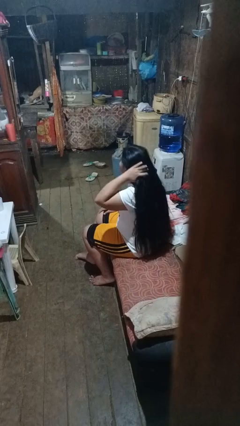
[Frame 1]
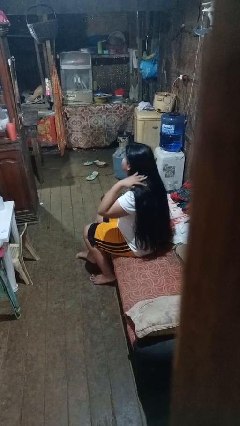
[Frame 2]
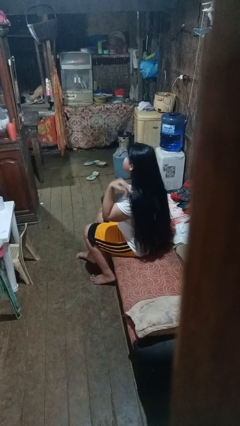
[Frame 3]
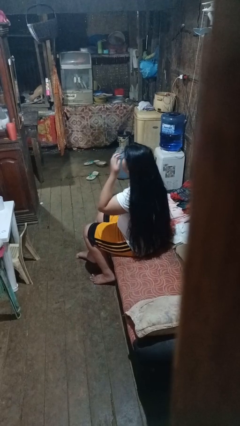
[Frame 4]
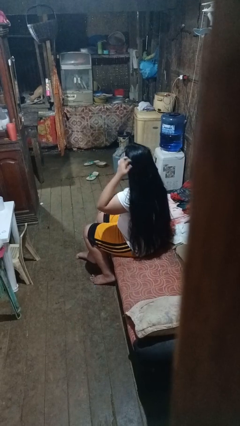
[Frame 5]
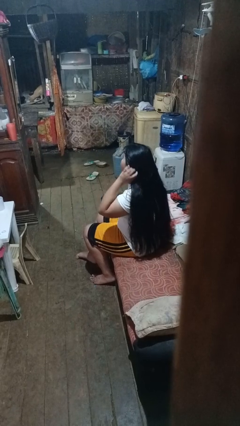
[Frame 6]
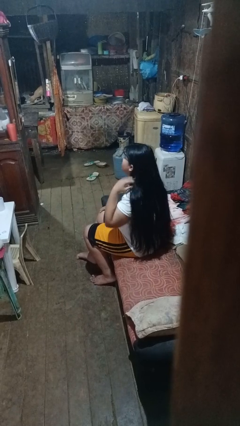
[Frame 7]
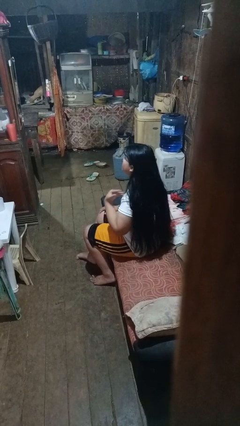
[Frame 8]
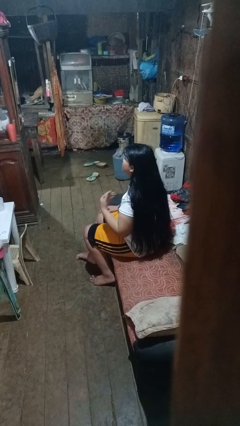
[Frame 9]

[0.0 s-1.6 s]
person strokes hair

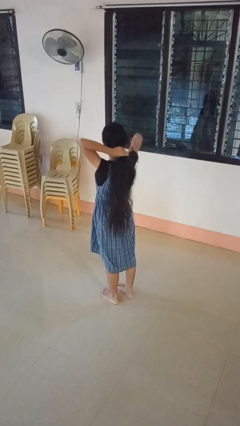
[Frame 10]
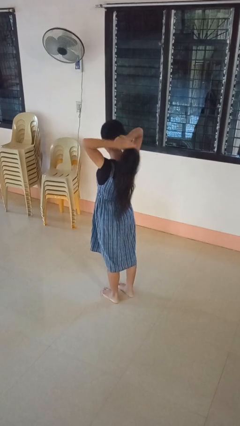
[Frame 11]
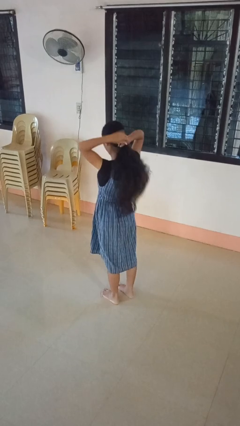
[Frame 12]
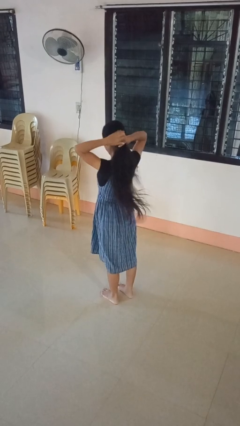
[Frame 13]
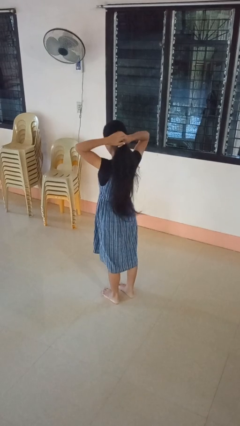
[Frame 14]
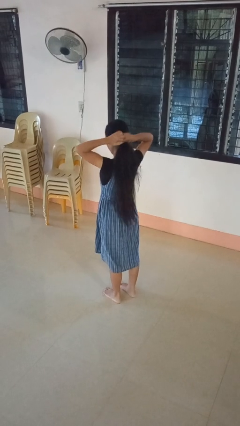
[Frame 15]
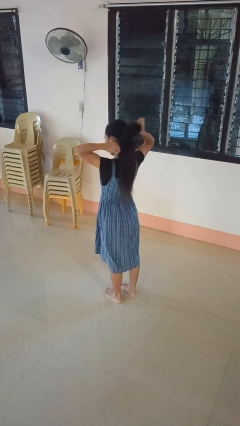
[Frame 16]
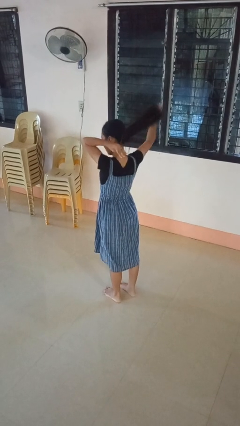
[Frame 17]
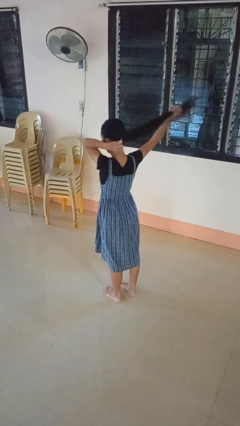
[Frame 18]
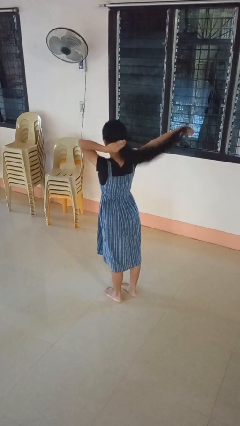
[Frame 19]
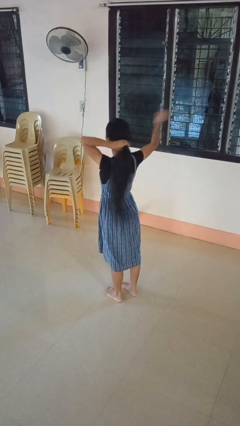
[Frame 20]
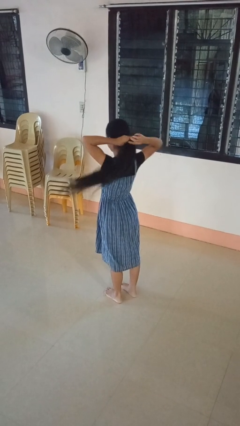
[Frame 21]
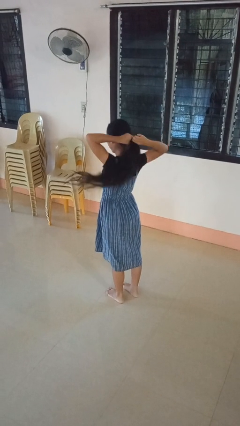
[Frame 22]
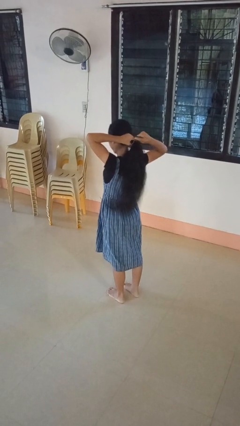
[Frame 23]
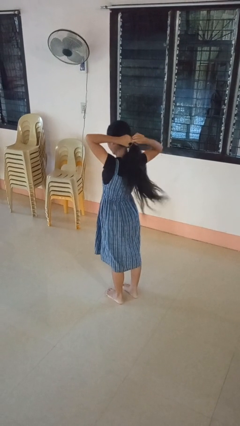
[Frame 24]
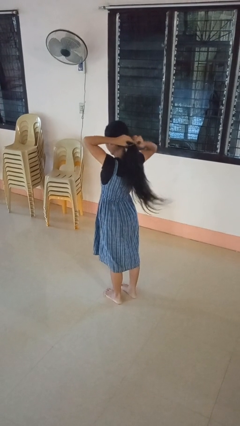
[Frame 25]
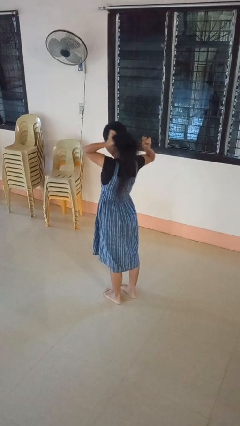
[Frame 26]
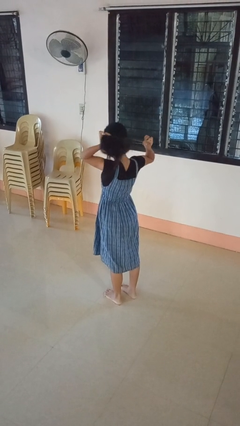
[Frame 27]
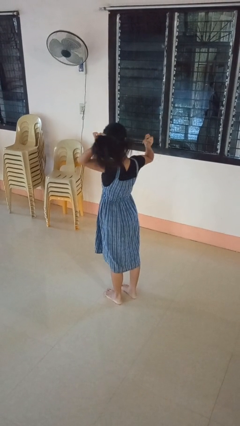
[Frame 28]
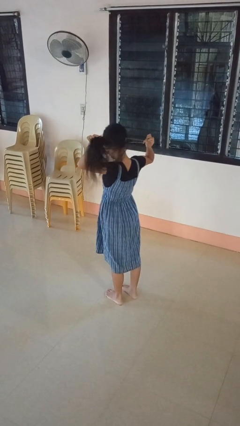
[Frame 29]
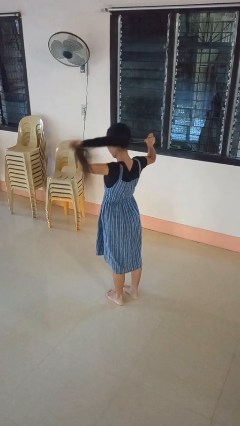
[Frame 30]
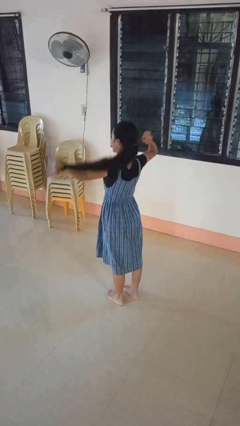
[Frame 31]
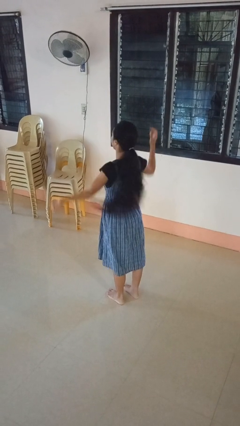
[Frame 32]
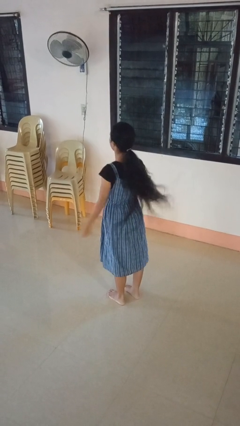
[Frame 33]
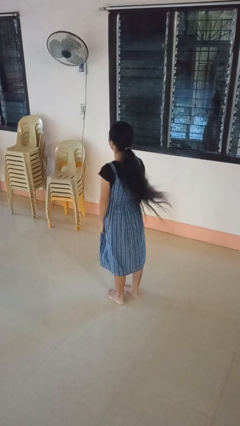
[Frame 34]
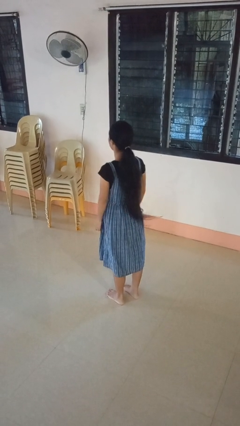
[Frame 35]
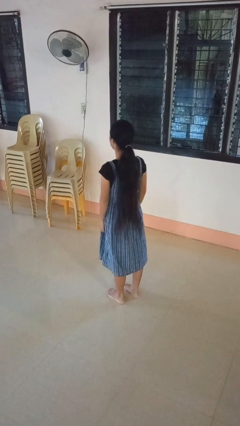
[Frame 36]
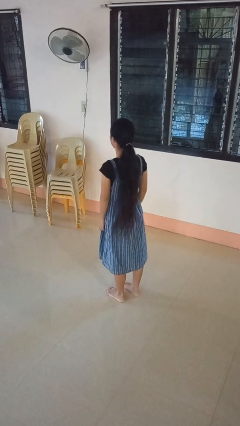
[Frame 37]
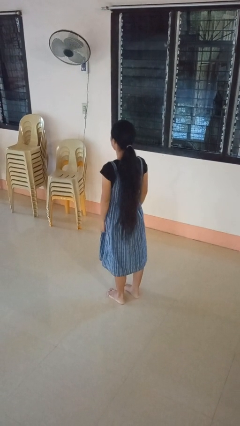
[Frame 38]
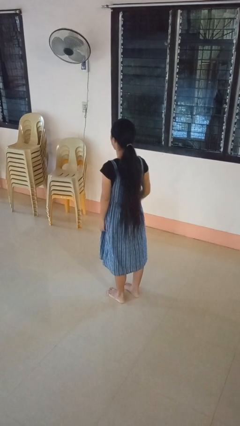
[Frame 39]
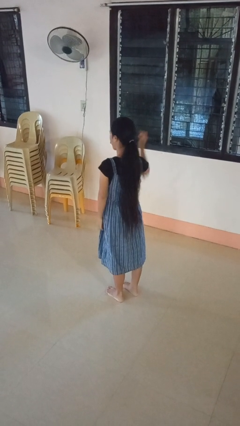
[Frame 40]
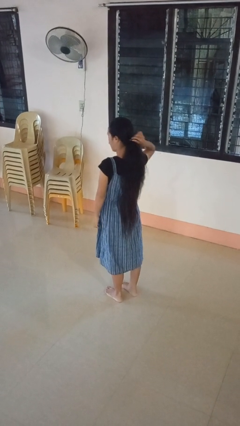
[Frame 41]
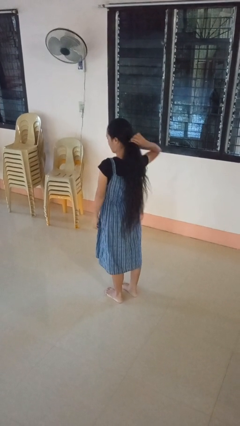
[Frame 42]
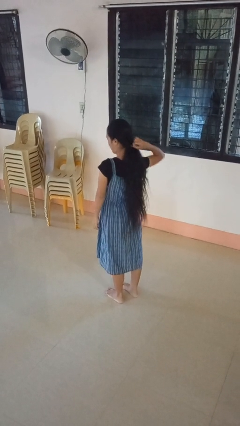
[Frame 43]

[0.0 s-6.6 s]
person puts hair in ponytail

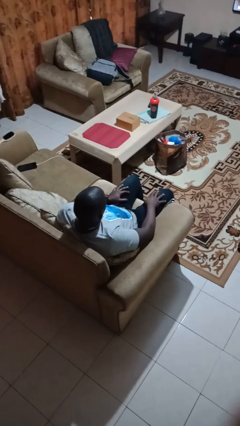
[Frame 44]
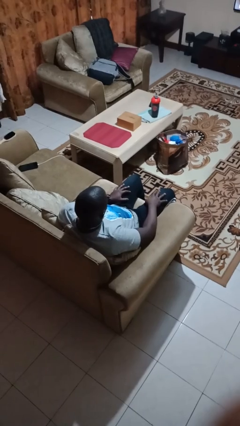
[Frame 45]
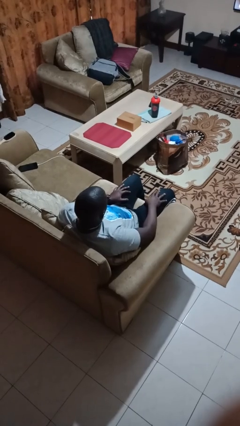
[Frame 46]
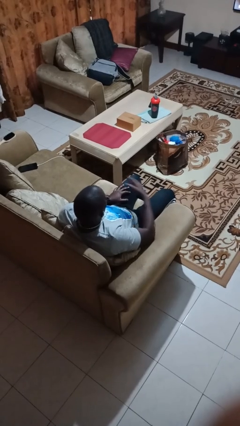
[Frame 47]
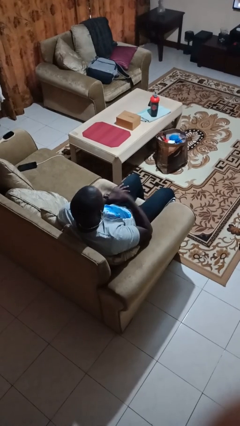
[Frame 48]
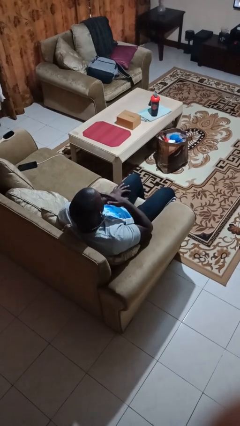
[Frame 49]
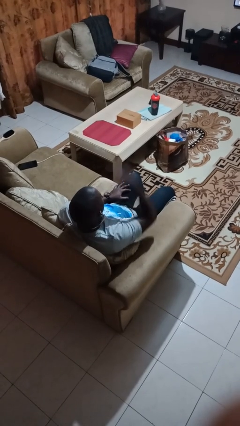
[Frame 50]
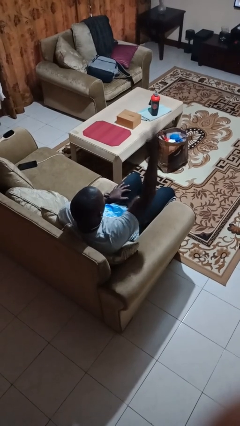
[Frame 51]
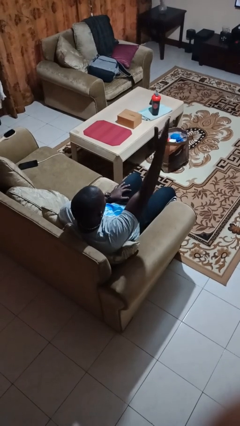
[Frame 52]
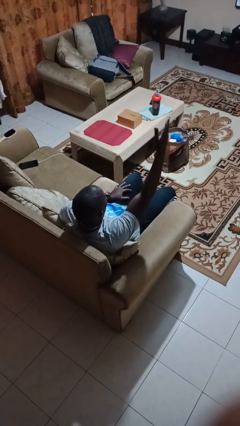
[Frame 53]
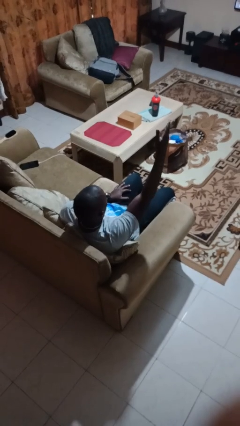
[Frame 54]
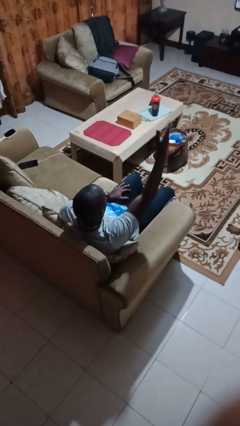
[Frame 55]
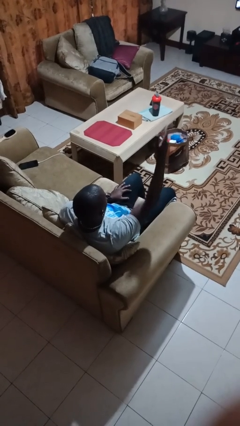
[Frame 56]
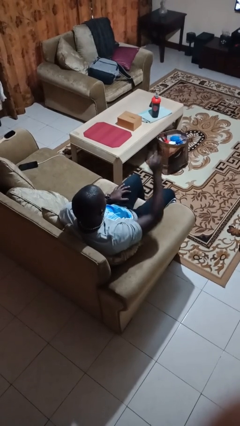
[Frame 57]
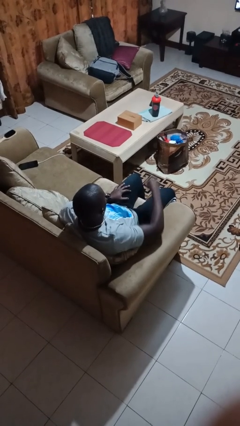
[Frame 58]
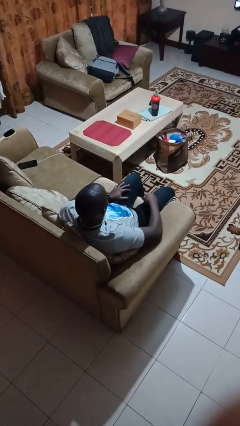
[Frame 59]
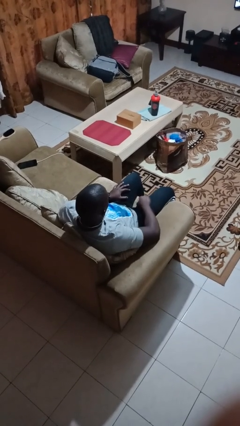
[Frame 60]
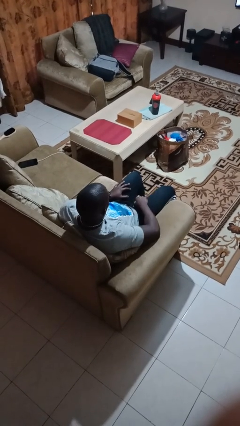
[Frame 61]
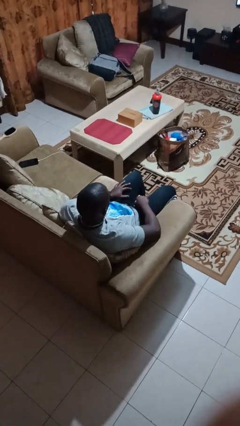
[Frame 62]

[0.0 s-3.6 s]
person gestures blow kiss

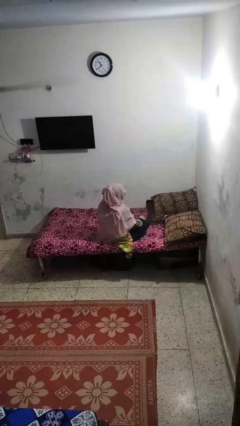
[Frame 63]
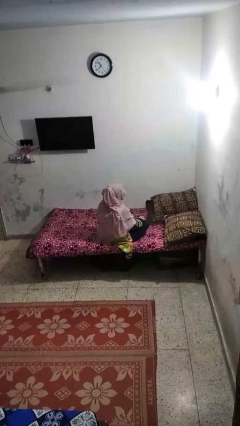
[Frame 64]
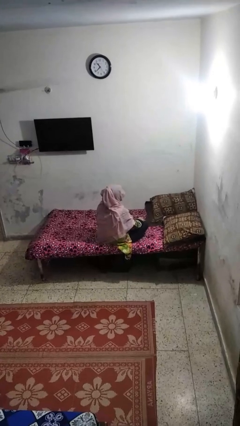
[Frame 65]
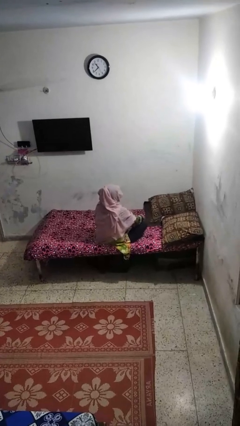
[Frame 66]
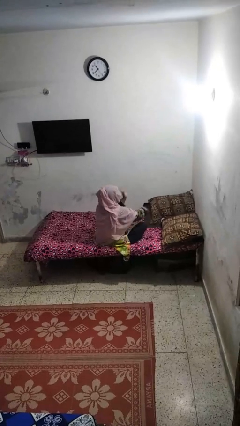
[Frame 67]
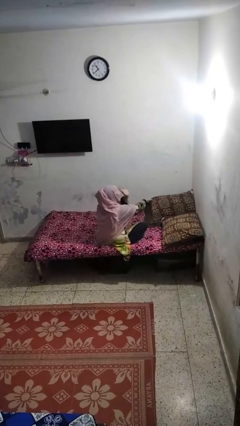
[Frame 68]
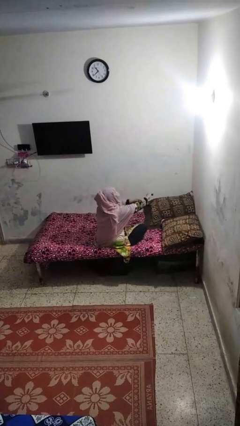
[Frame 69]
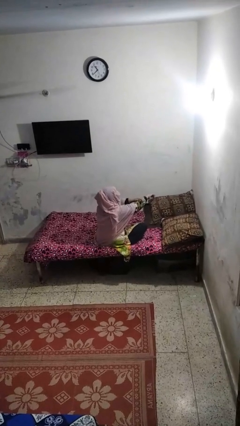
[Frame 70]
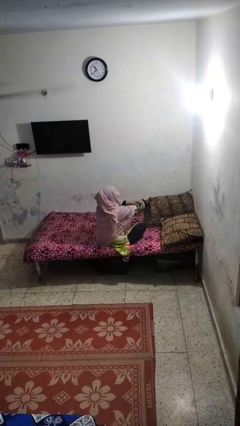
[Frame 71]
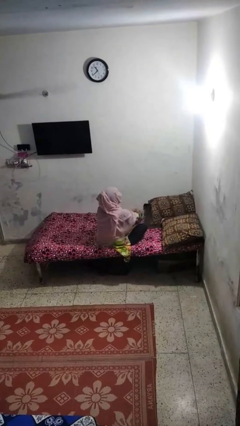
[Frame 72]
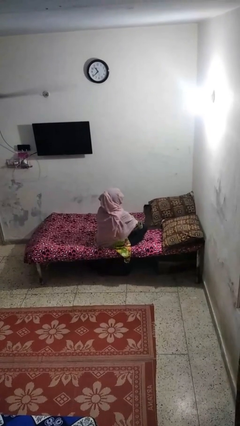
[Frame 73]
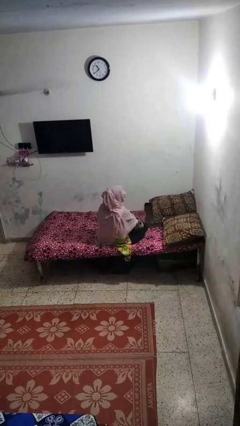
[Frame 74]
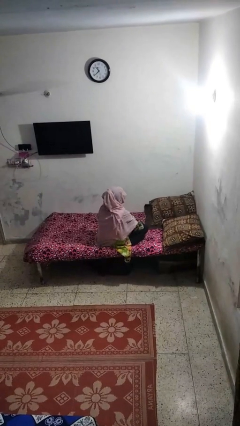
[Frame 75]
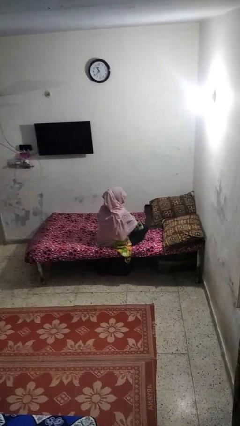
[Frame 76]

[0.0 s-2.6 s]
person swats bug

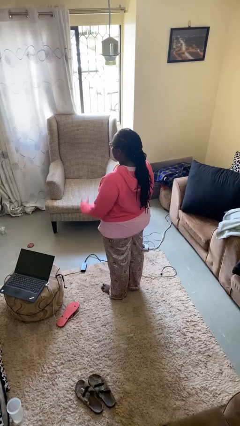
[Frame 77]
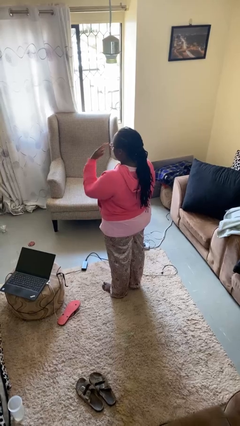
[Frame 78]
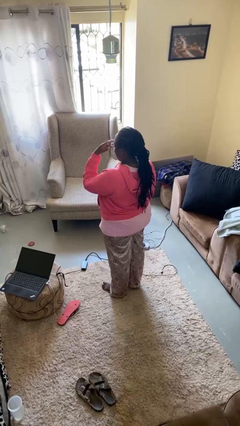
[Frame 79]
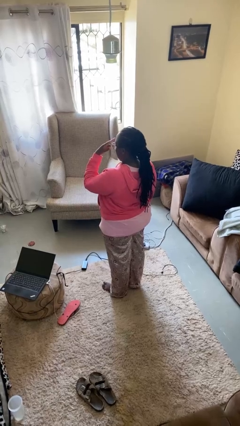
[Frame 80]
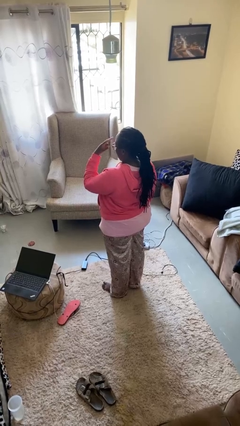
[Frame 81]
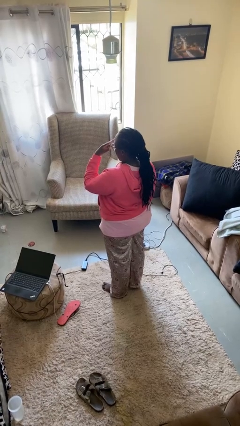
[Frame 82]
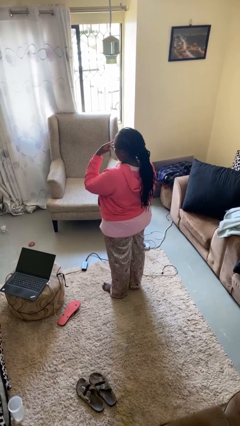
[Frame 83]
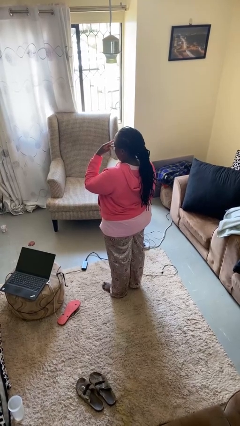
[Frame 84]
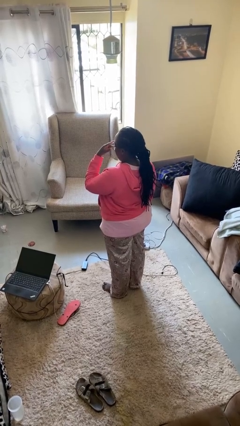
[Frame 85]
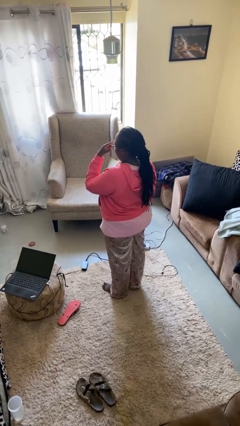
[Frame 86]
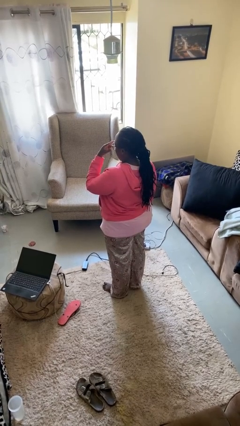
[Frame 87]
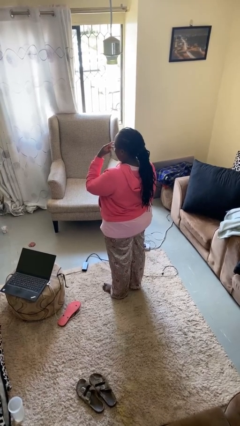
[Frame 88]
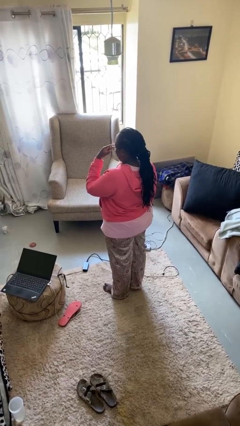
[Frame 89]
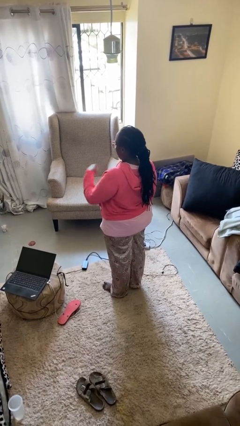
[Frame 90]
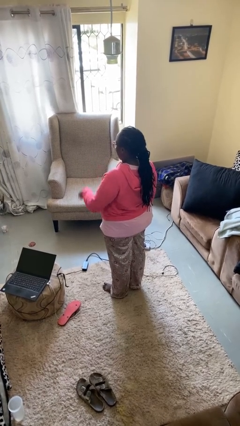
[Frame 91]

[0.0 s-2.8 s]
person gestures watch closely
